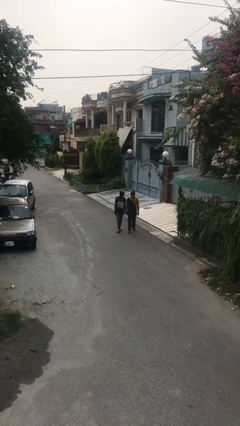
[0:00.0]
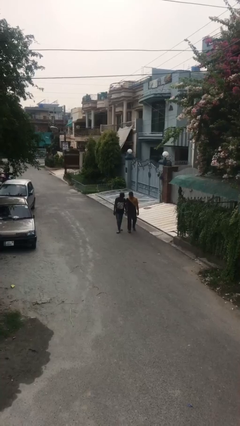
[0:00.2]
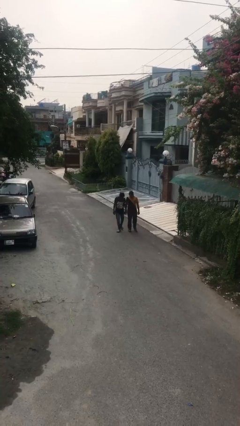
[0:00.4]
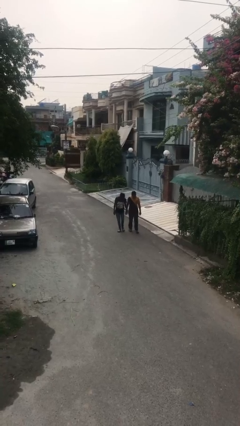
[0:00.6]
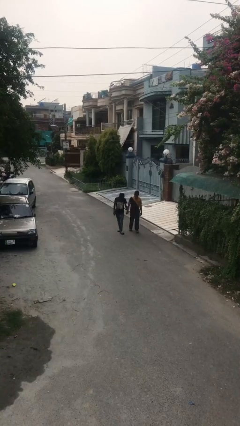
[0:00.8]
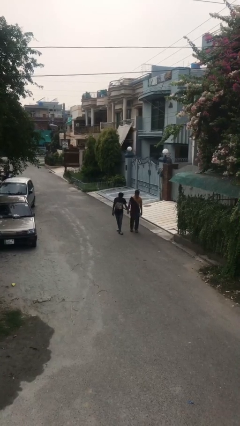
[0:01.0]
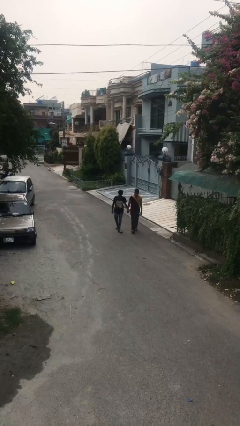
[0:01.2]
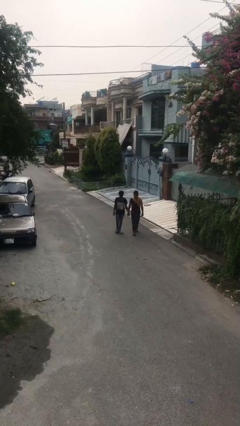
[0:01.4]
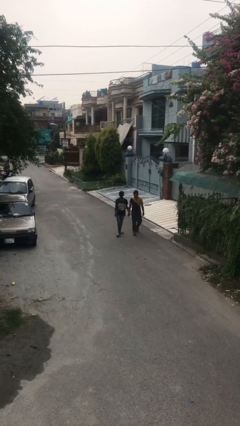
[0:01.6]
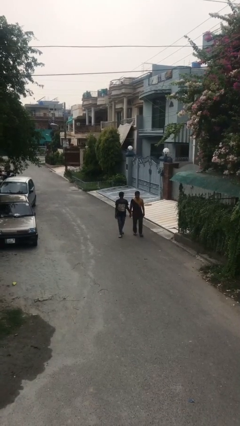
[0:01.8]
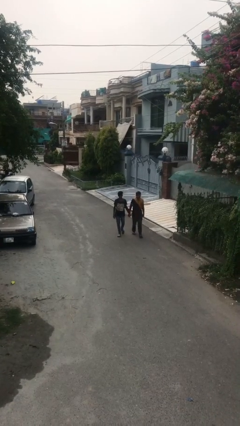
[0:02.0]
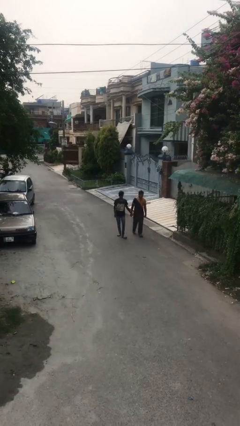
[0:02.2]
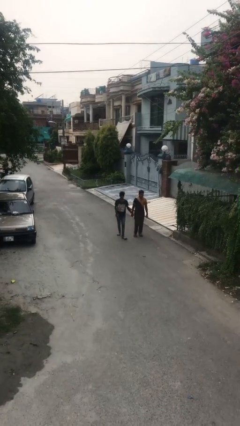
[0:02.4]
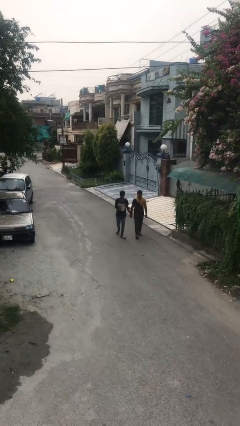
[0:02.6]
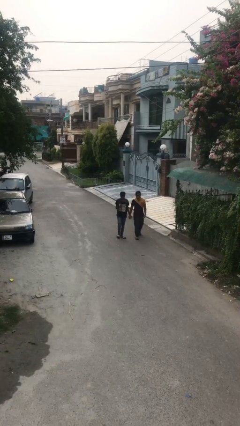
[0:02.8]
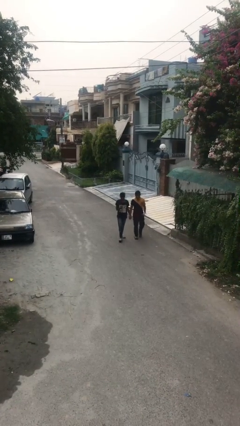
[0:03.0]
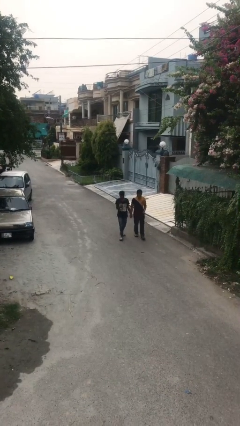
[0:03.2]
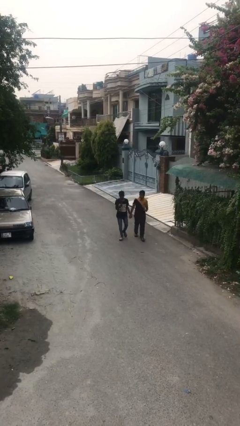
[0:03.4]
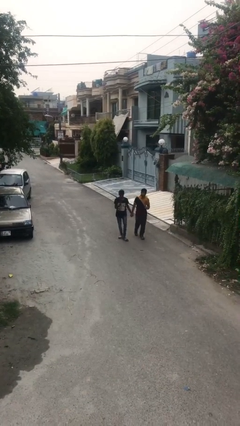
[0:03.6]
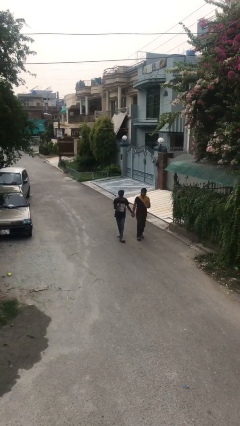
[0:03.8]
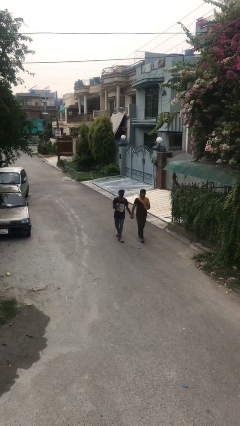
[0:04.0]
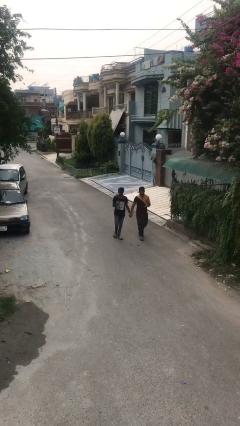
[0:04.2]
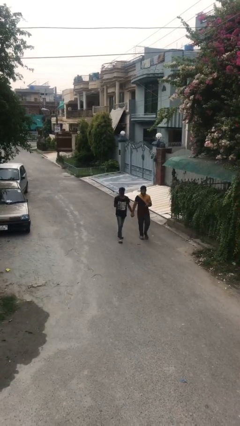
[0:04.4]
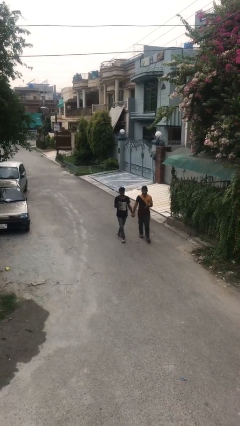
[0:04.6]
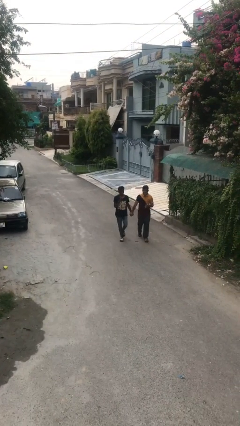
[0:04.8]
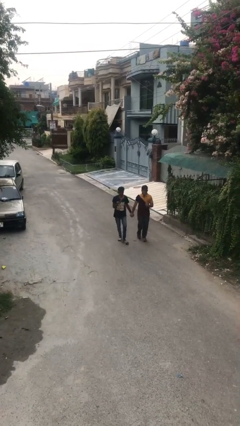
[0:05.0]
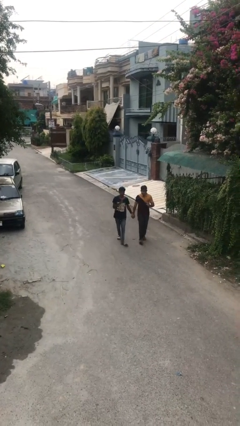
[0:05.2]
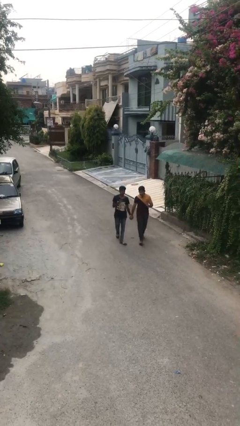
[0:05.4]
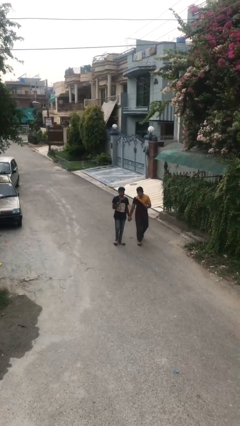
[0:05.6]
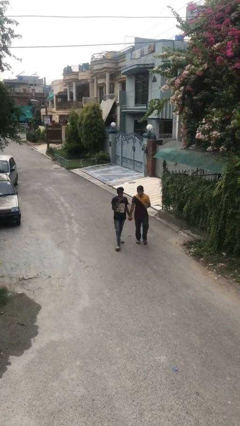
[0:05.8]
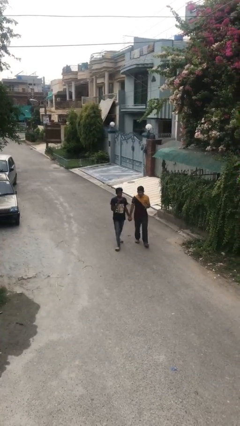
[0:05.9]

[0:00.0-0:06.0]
person holds hand

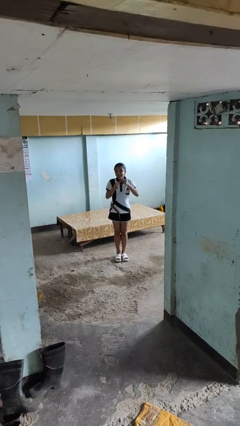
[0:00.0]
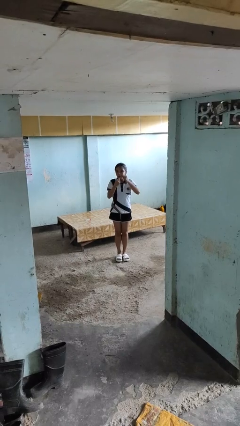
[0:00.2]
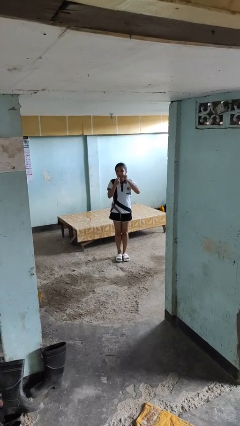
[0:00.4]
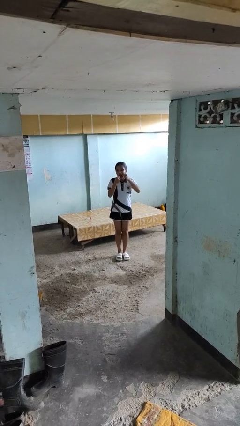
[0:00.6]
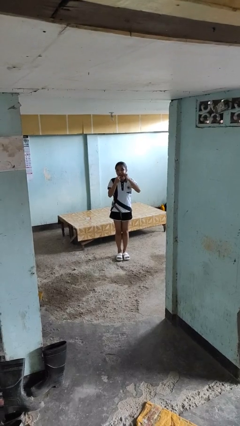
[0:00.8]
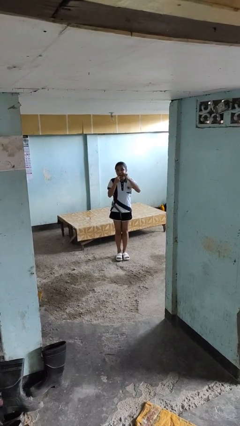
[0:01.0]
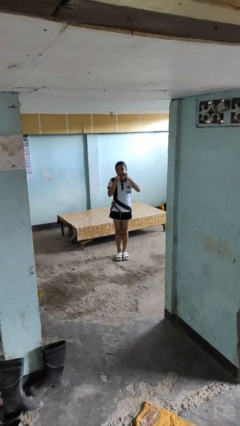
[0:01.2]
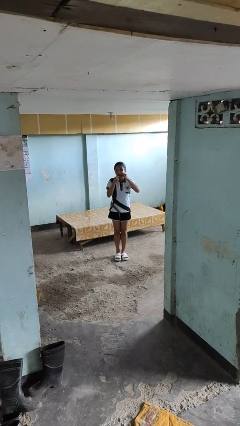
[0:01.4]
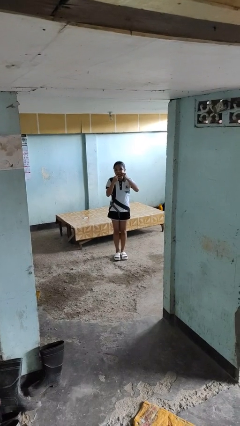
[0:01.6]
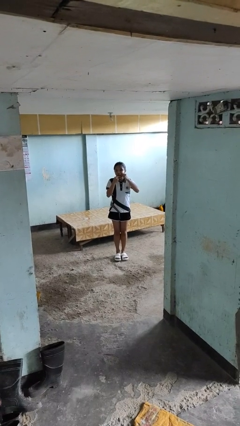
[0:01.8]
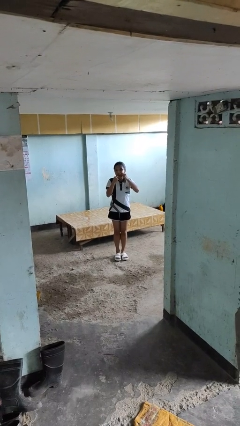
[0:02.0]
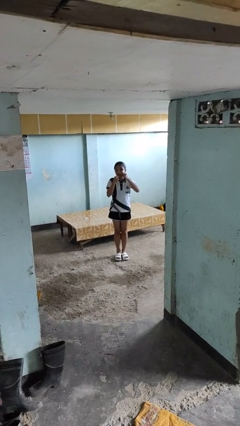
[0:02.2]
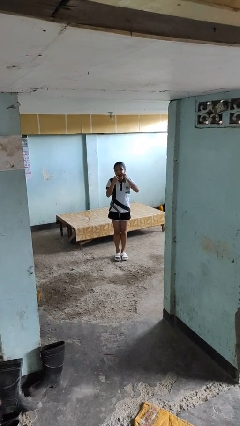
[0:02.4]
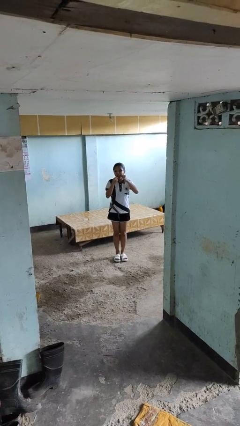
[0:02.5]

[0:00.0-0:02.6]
person flosses

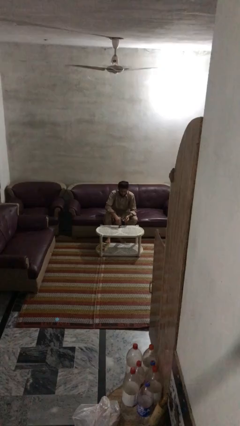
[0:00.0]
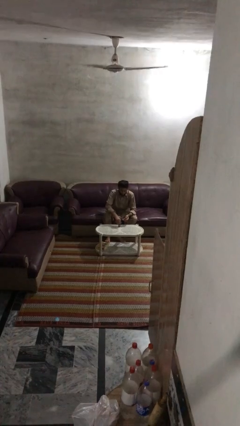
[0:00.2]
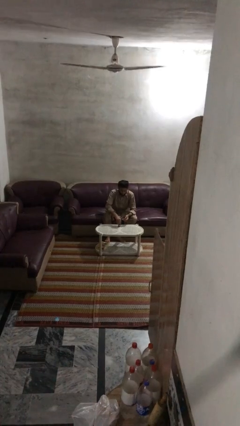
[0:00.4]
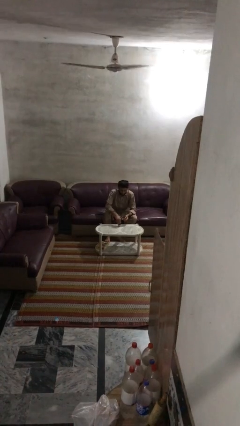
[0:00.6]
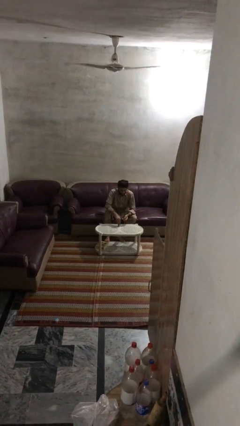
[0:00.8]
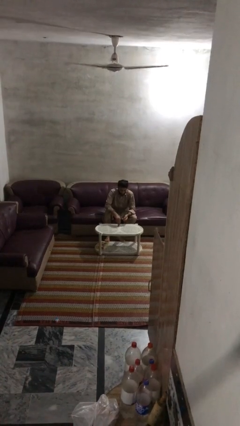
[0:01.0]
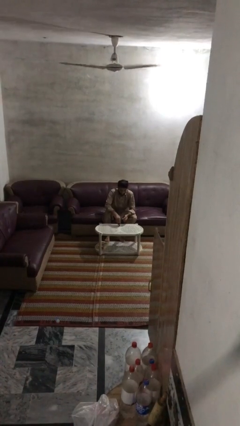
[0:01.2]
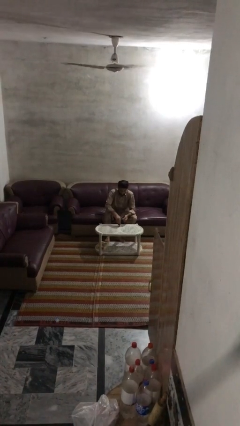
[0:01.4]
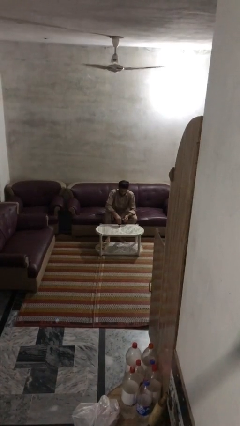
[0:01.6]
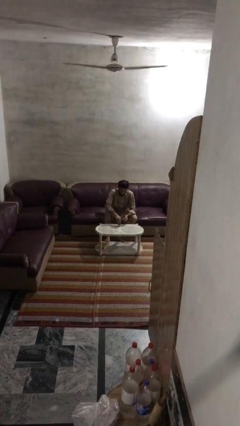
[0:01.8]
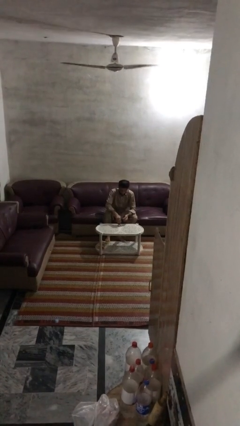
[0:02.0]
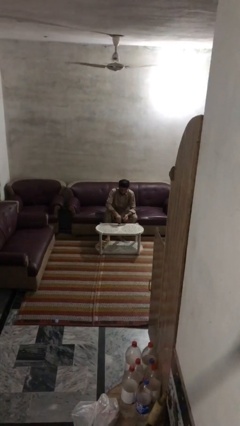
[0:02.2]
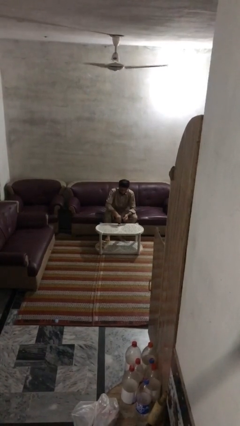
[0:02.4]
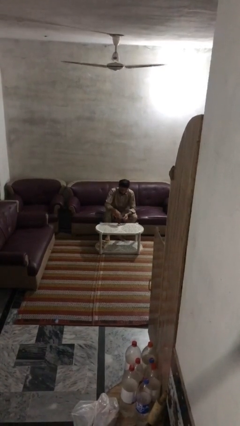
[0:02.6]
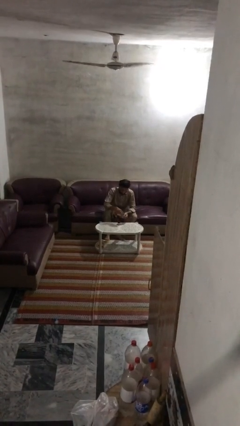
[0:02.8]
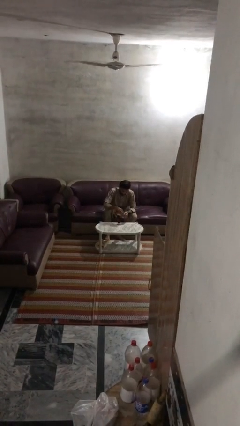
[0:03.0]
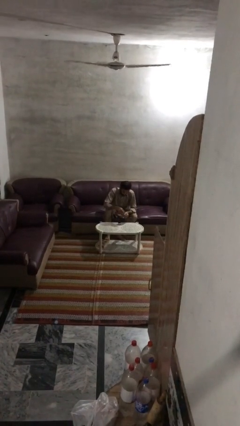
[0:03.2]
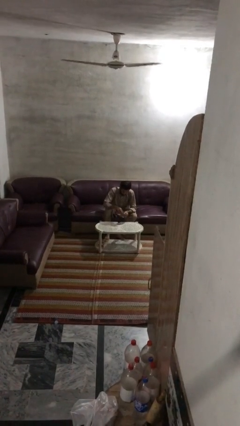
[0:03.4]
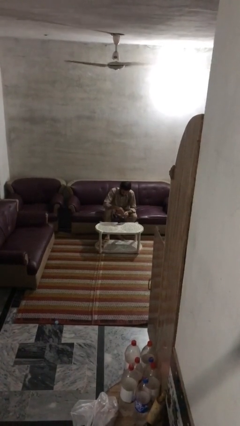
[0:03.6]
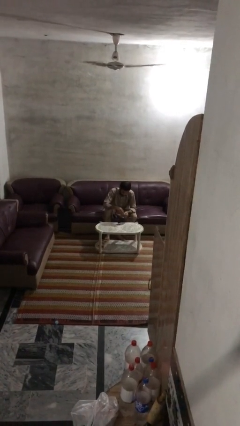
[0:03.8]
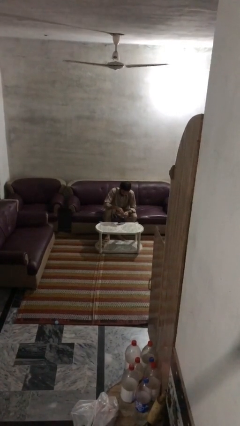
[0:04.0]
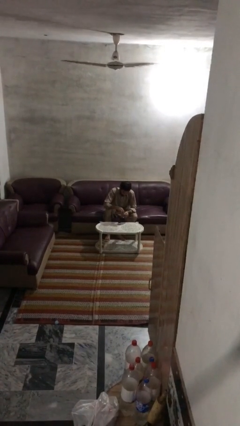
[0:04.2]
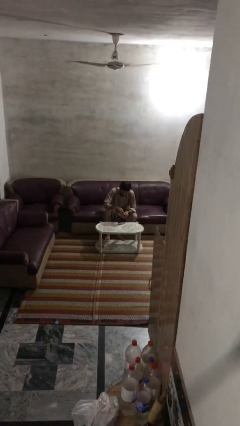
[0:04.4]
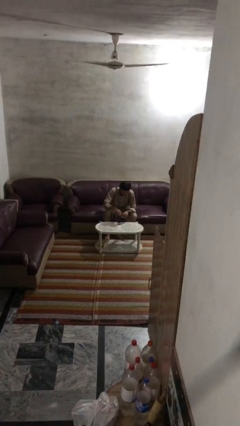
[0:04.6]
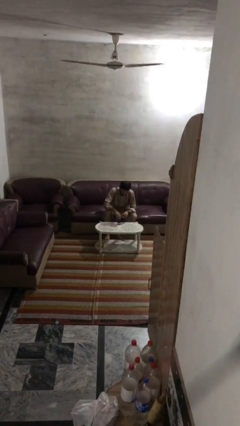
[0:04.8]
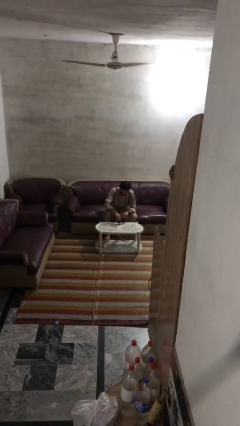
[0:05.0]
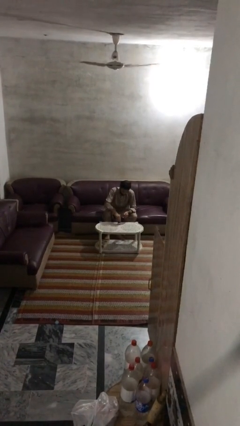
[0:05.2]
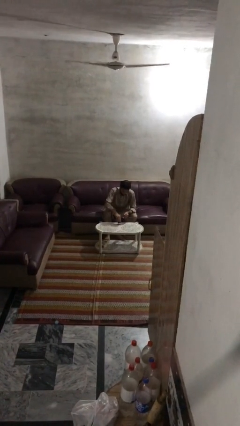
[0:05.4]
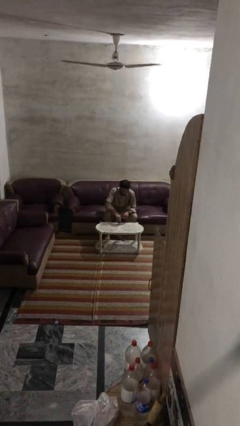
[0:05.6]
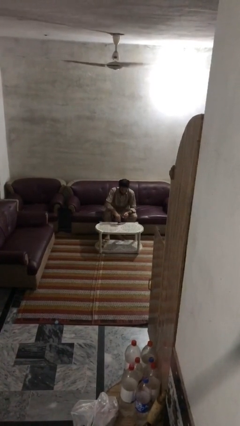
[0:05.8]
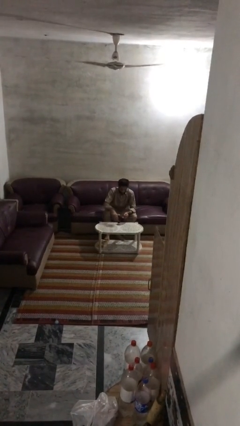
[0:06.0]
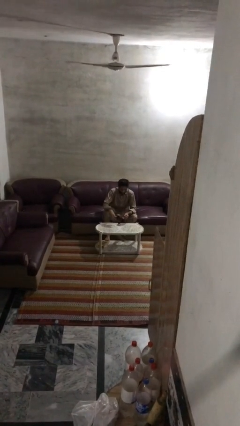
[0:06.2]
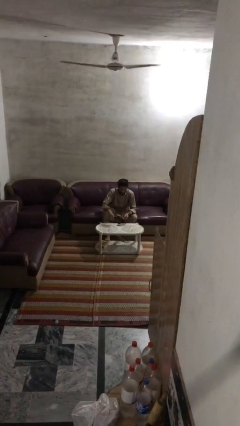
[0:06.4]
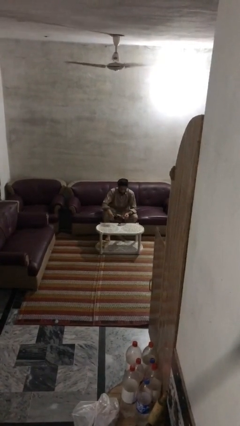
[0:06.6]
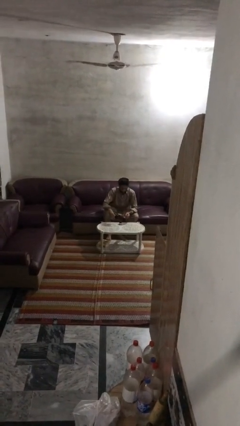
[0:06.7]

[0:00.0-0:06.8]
person paints fingernails

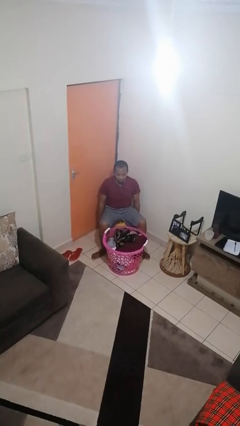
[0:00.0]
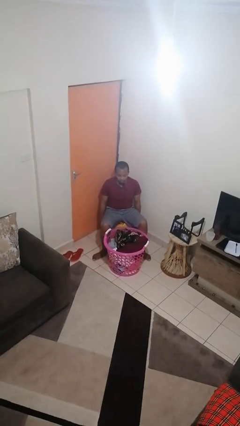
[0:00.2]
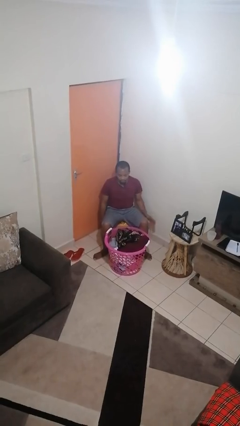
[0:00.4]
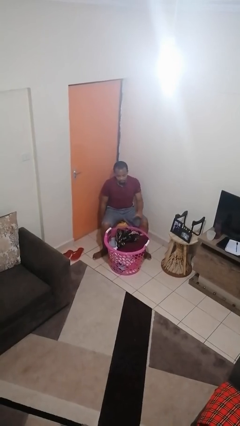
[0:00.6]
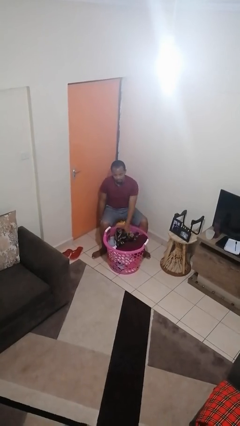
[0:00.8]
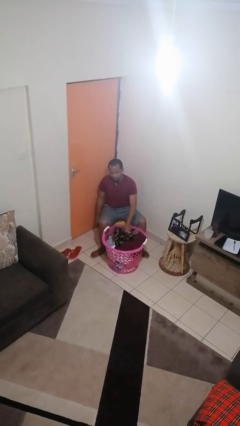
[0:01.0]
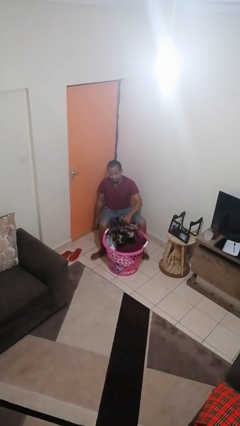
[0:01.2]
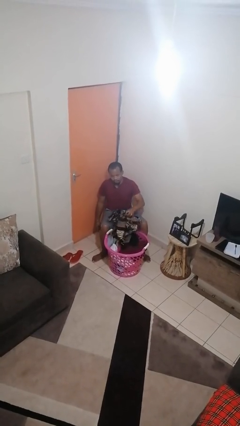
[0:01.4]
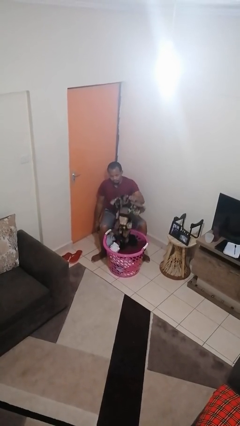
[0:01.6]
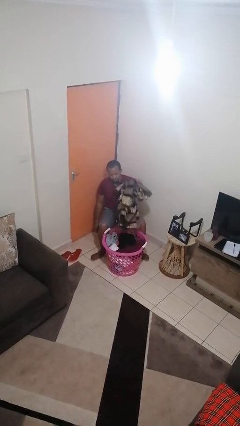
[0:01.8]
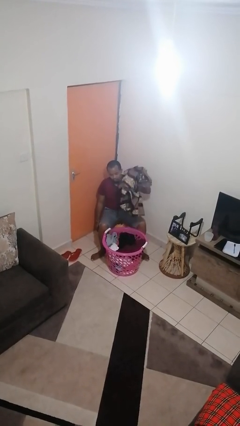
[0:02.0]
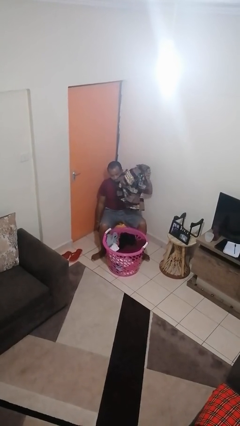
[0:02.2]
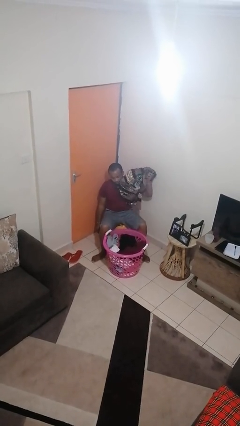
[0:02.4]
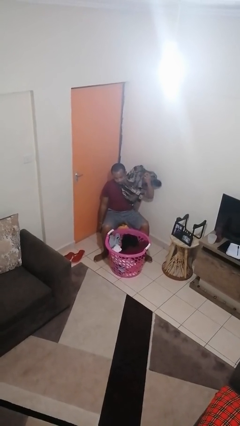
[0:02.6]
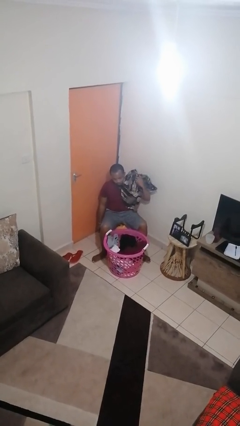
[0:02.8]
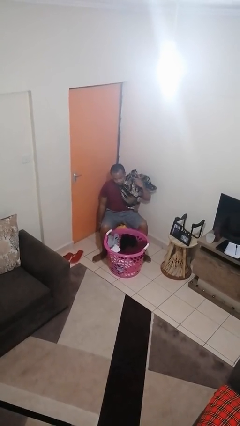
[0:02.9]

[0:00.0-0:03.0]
person takes object from basket
